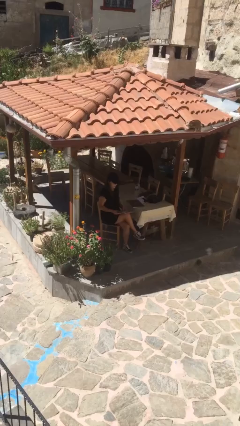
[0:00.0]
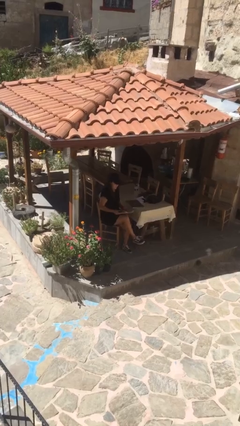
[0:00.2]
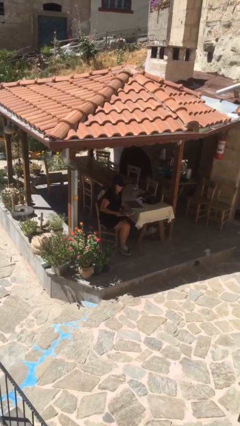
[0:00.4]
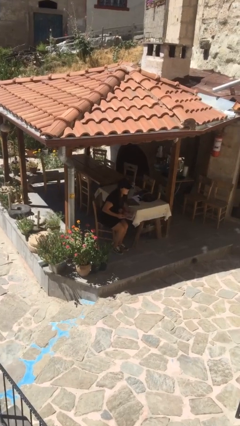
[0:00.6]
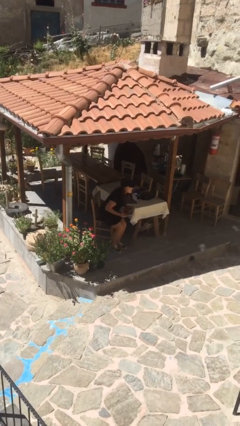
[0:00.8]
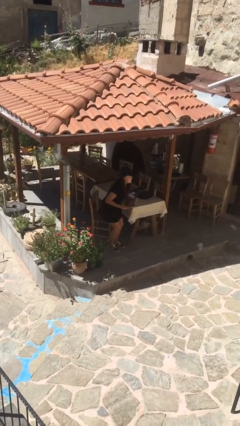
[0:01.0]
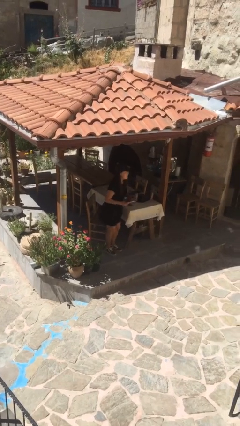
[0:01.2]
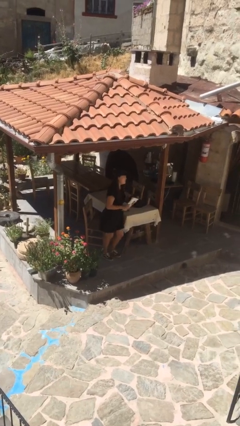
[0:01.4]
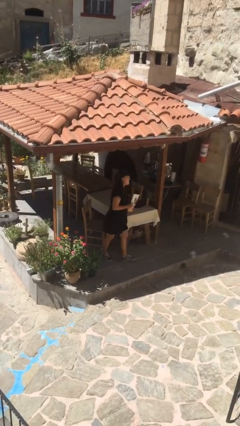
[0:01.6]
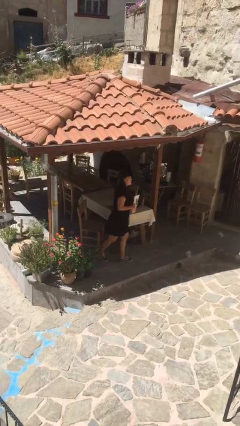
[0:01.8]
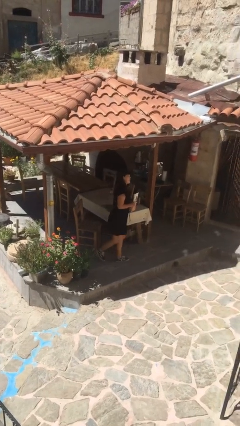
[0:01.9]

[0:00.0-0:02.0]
person stands up

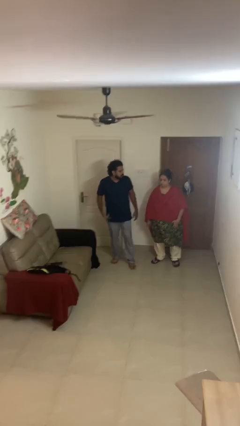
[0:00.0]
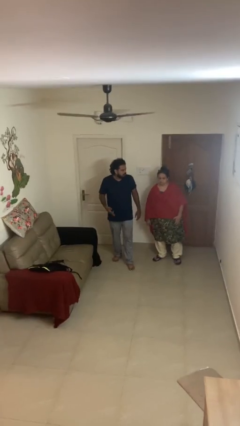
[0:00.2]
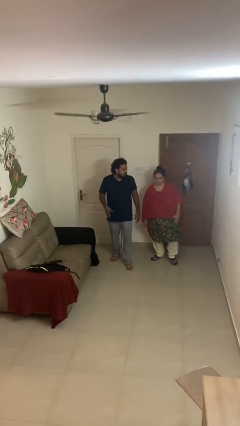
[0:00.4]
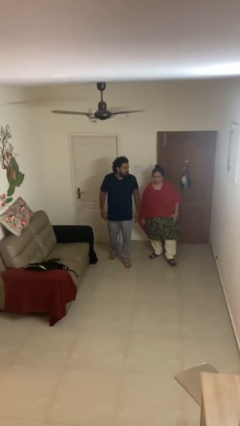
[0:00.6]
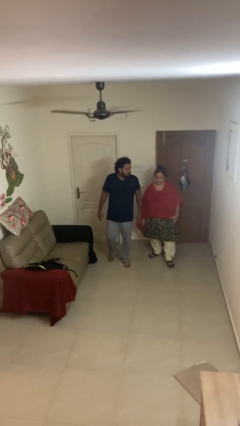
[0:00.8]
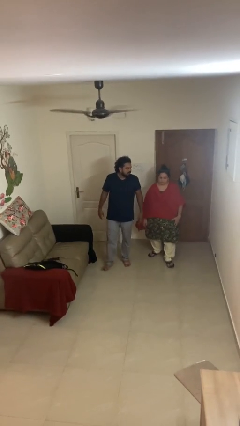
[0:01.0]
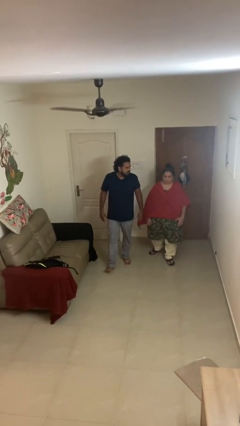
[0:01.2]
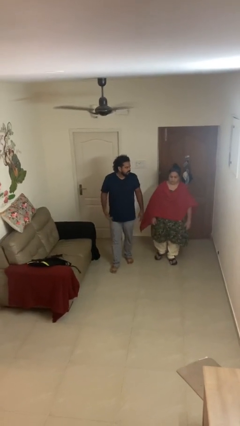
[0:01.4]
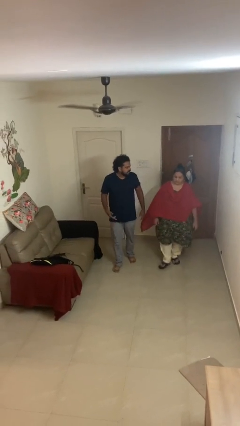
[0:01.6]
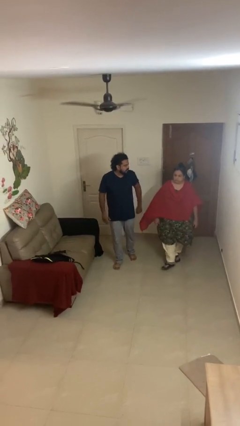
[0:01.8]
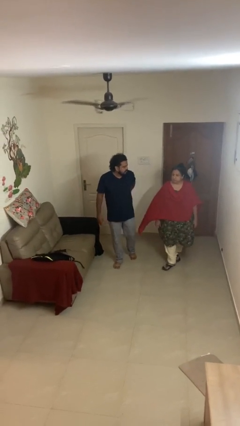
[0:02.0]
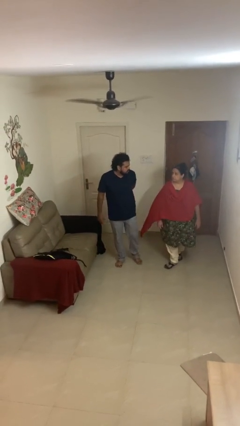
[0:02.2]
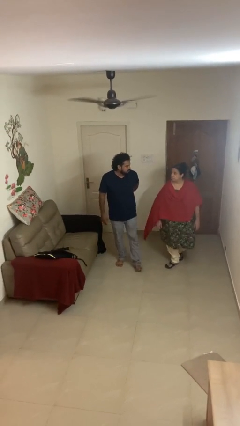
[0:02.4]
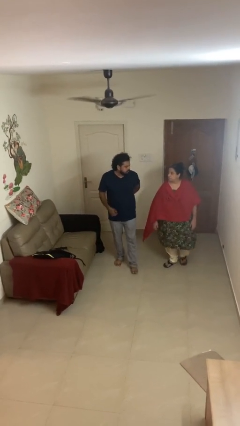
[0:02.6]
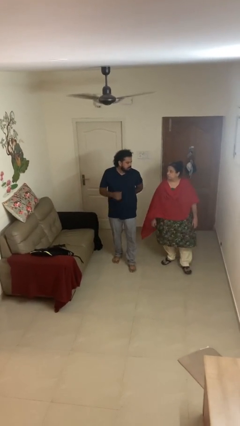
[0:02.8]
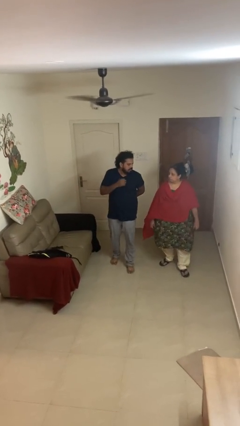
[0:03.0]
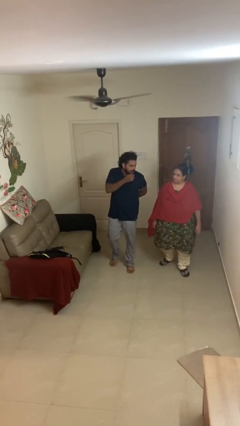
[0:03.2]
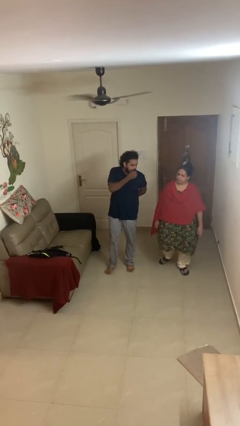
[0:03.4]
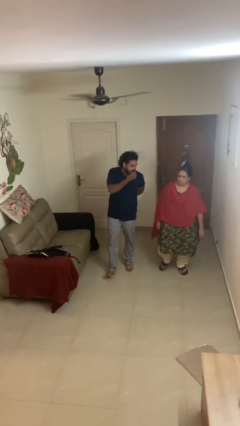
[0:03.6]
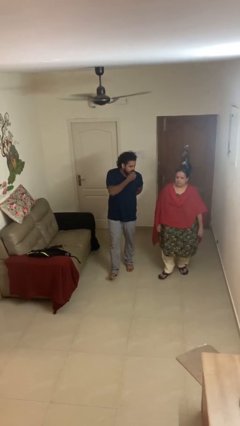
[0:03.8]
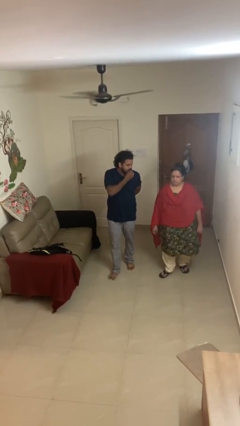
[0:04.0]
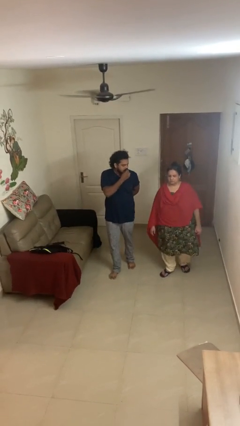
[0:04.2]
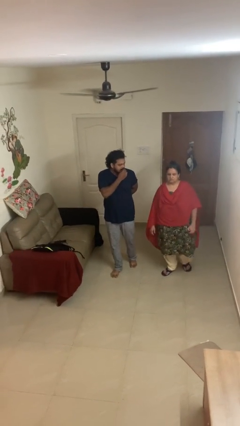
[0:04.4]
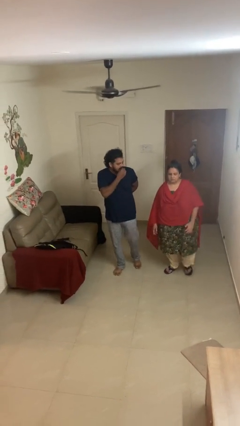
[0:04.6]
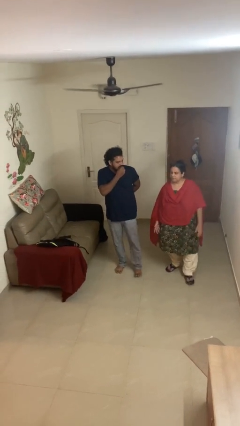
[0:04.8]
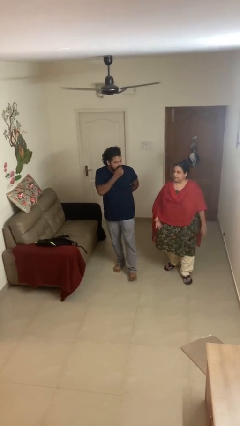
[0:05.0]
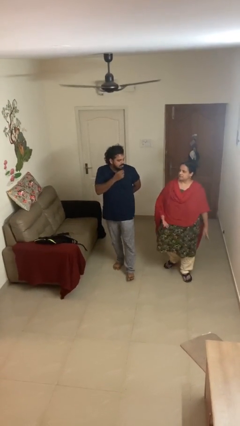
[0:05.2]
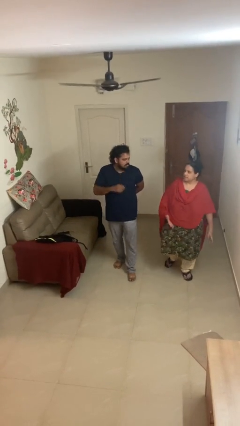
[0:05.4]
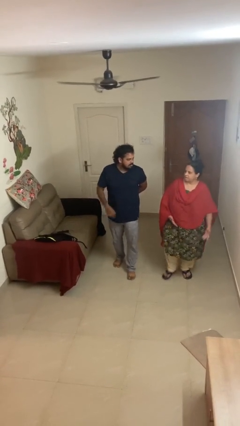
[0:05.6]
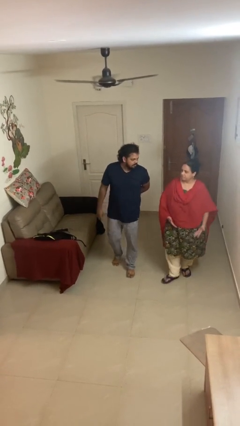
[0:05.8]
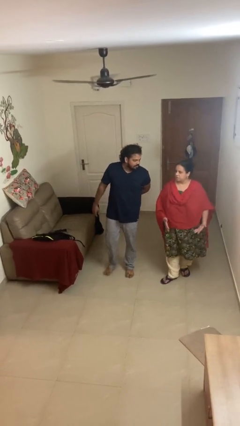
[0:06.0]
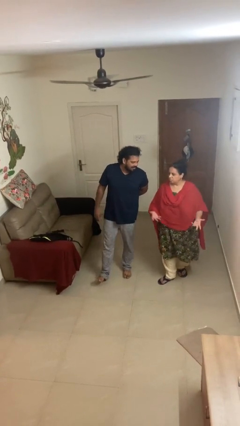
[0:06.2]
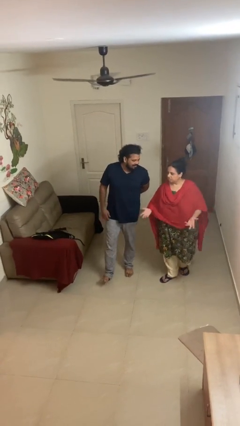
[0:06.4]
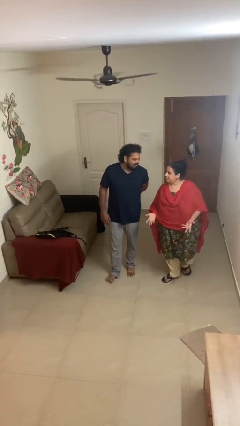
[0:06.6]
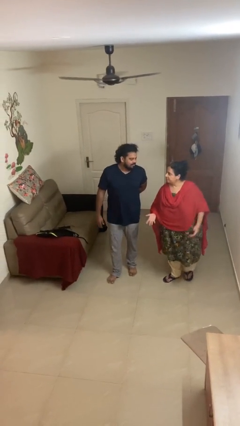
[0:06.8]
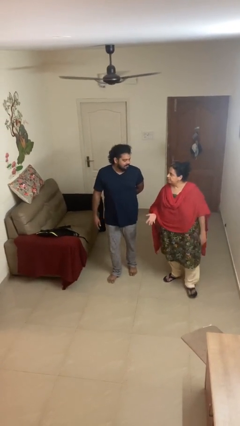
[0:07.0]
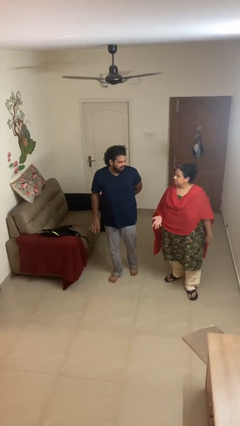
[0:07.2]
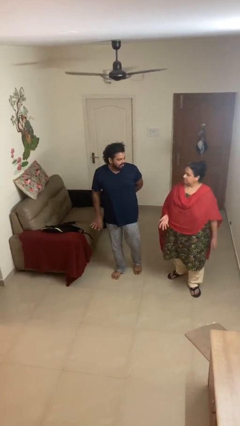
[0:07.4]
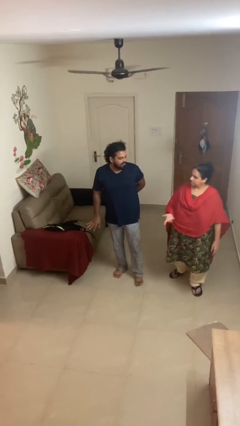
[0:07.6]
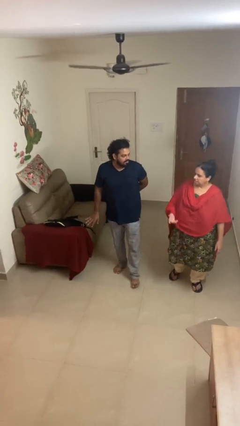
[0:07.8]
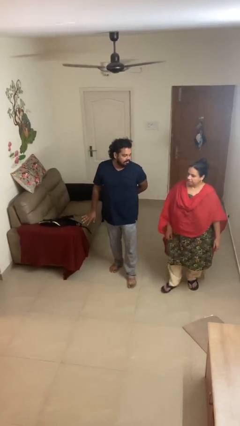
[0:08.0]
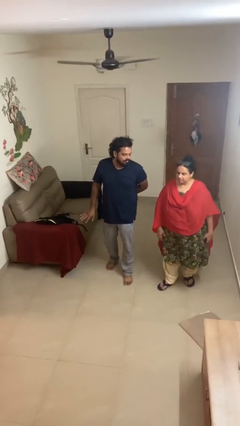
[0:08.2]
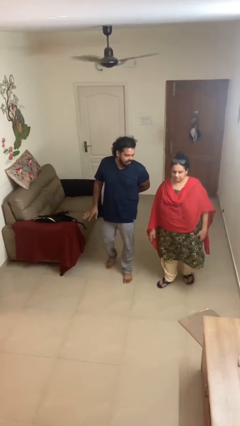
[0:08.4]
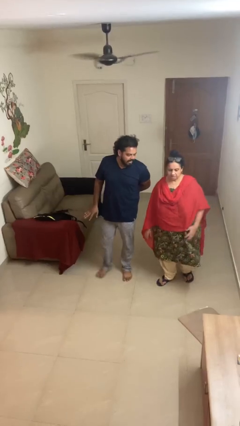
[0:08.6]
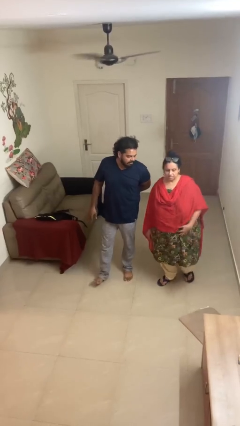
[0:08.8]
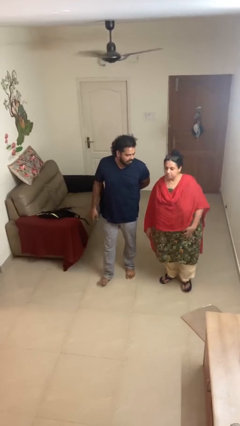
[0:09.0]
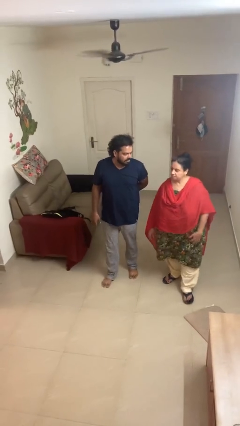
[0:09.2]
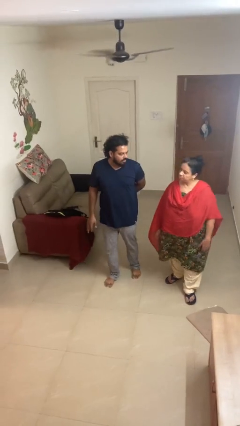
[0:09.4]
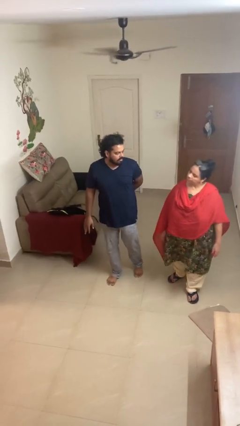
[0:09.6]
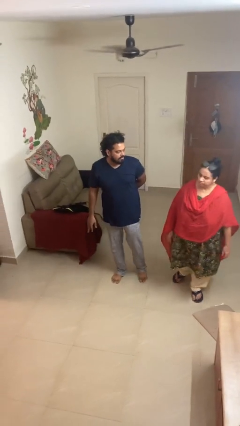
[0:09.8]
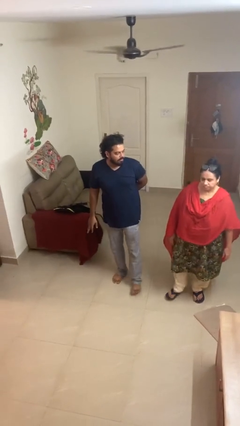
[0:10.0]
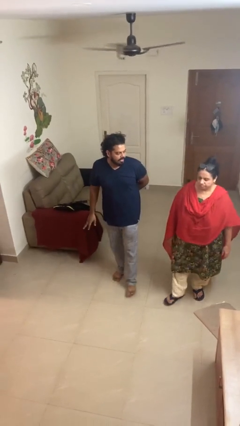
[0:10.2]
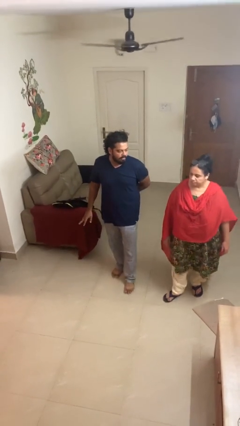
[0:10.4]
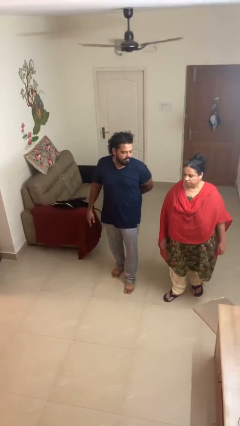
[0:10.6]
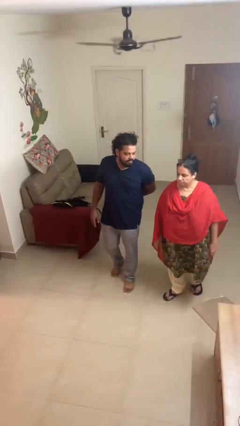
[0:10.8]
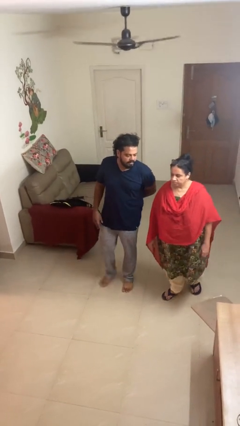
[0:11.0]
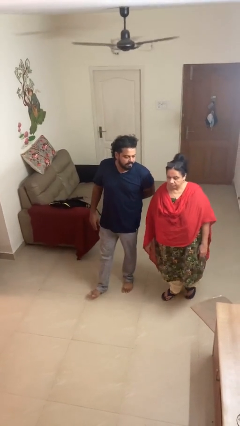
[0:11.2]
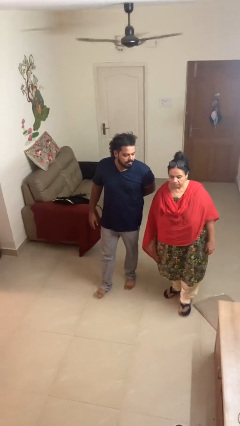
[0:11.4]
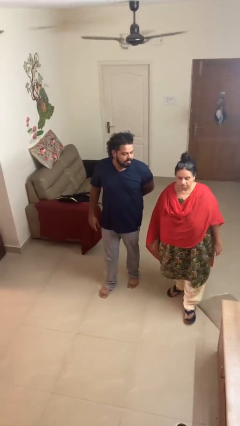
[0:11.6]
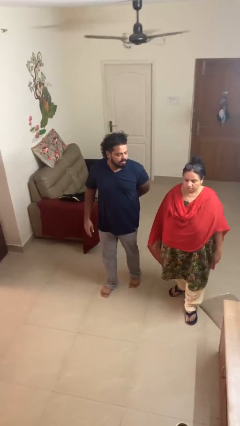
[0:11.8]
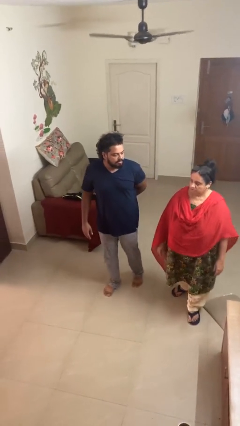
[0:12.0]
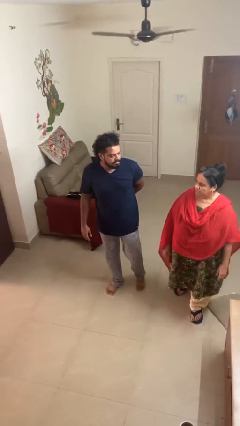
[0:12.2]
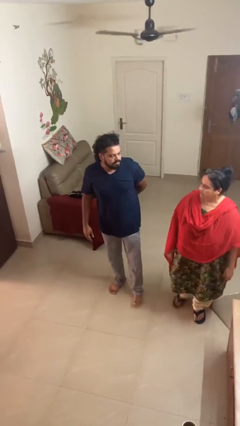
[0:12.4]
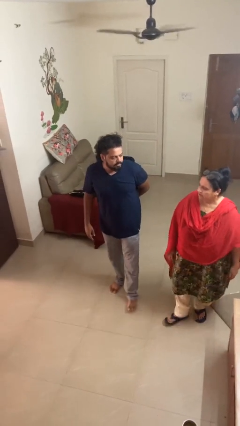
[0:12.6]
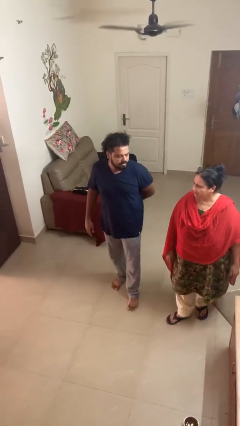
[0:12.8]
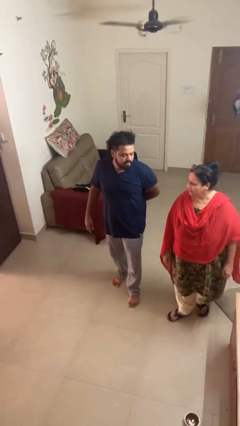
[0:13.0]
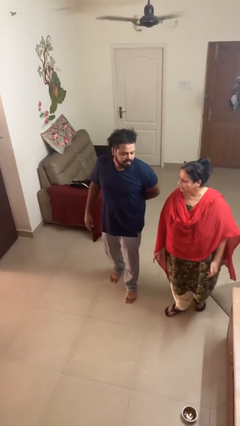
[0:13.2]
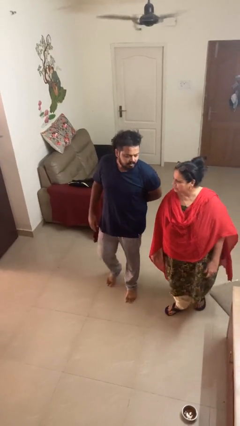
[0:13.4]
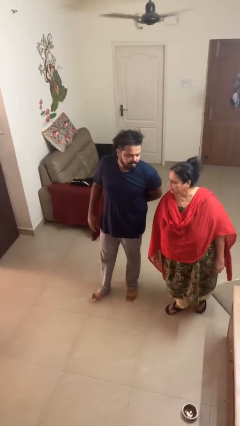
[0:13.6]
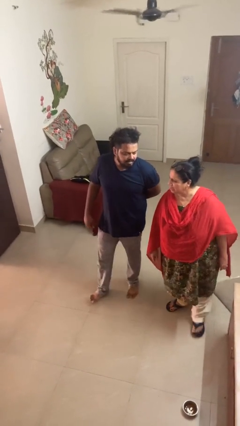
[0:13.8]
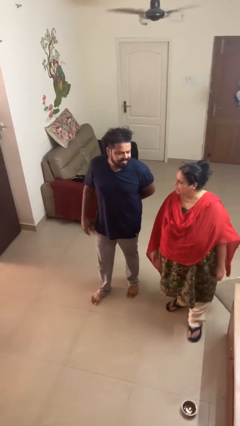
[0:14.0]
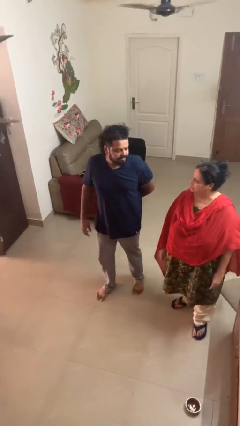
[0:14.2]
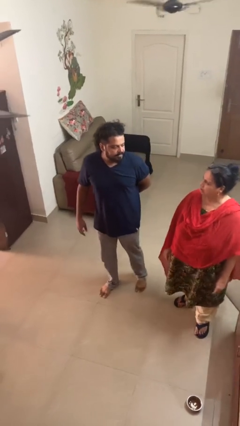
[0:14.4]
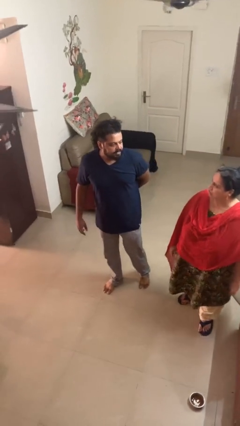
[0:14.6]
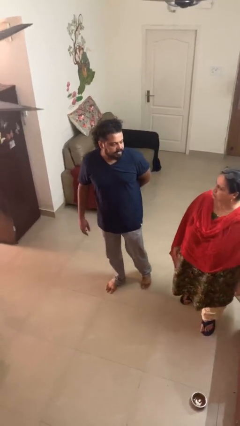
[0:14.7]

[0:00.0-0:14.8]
person talks to person

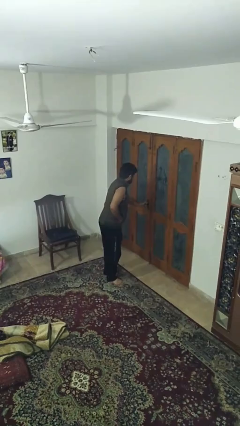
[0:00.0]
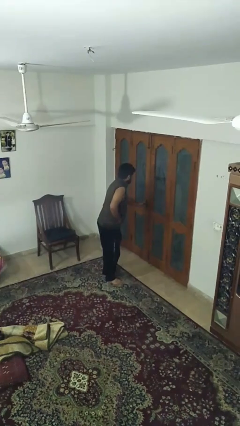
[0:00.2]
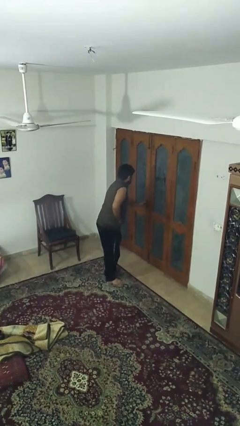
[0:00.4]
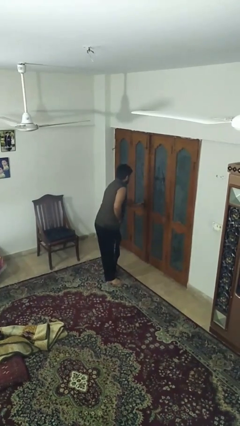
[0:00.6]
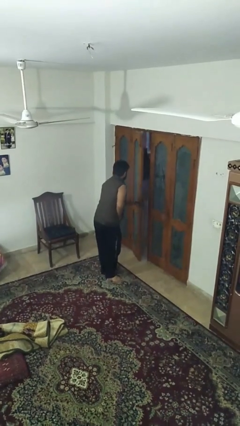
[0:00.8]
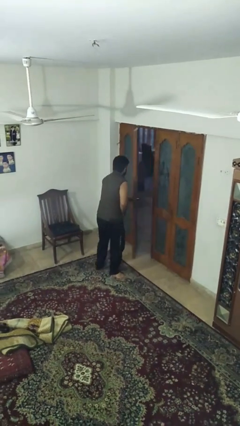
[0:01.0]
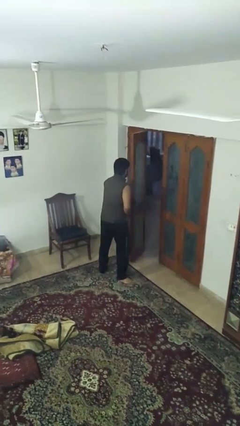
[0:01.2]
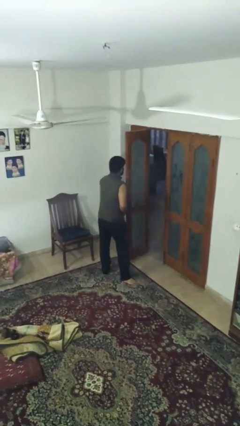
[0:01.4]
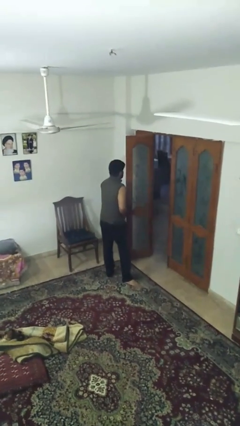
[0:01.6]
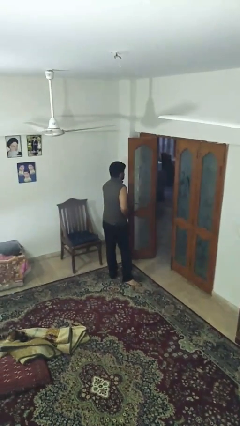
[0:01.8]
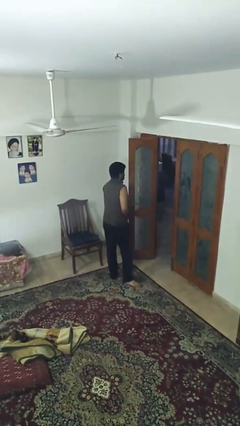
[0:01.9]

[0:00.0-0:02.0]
person opens facility door
